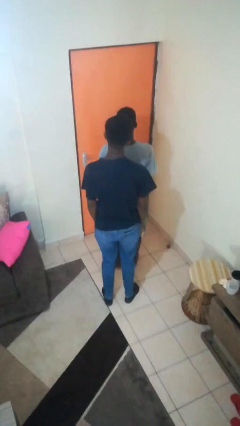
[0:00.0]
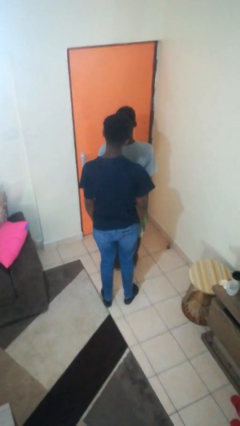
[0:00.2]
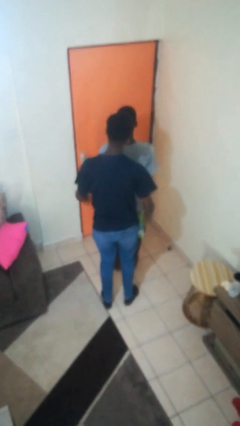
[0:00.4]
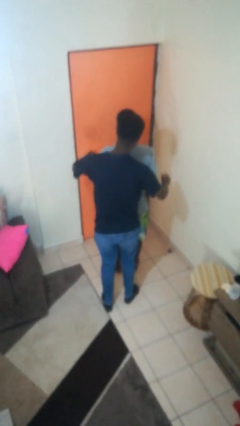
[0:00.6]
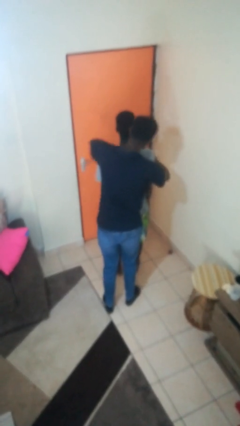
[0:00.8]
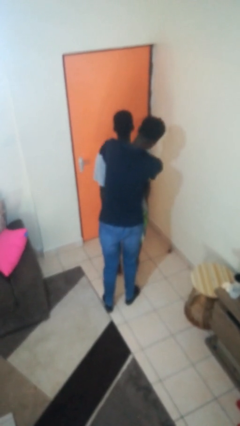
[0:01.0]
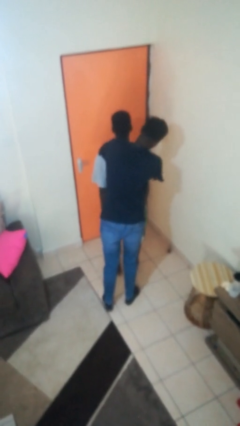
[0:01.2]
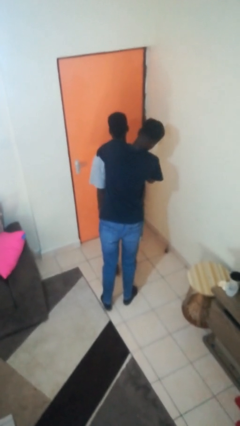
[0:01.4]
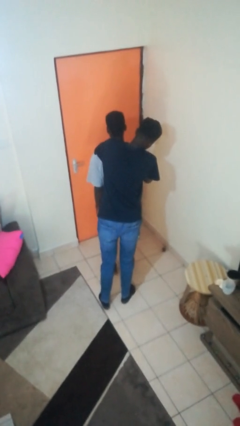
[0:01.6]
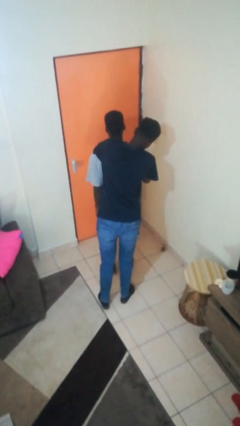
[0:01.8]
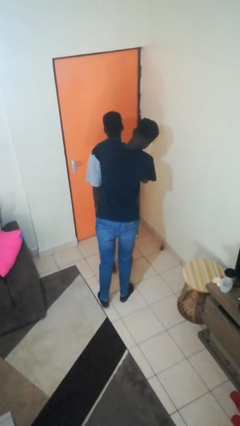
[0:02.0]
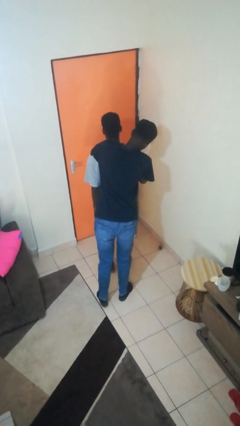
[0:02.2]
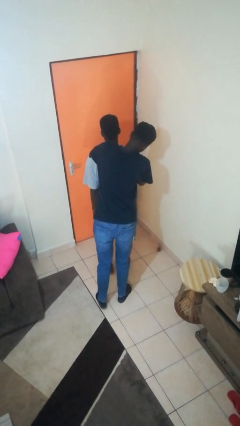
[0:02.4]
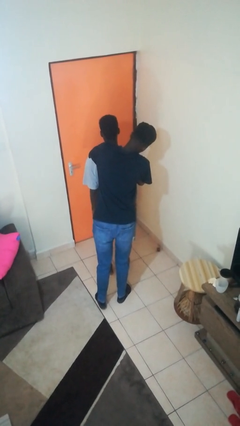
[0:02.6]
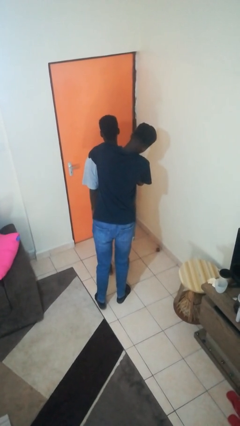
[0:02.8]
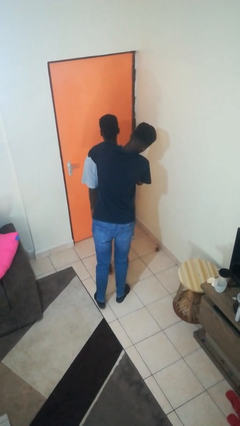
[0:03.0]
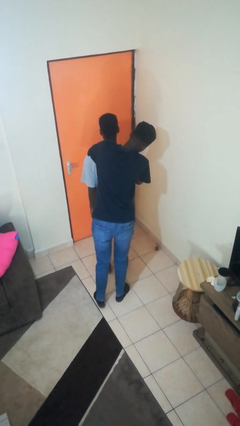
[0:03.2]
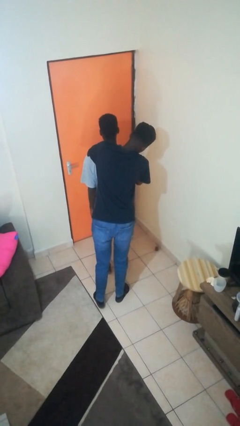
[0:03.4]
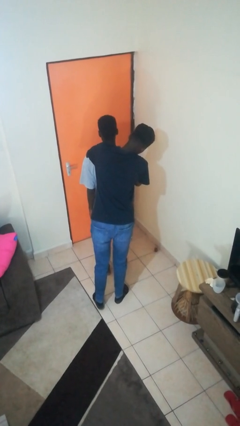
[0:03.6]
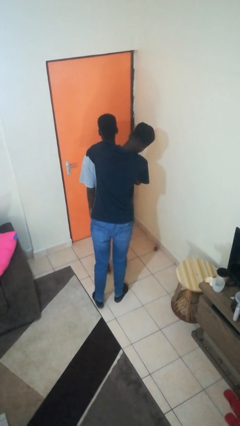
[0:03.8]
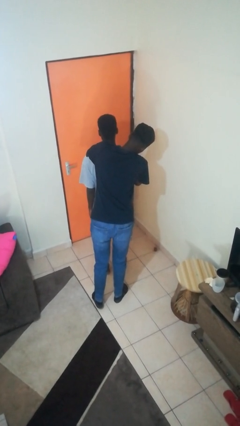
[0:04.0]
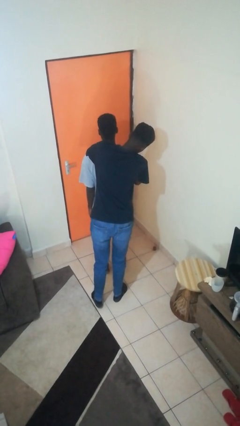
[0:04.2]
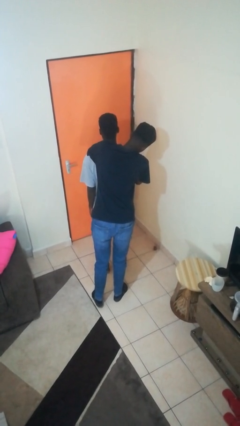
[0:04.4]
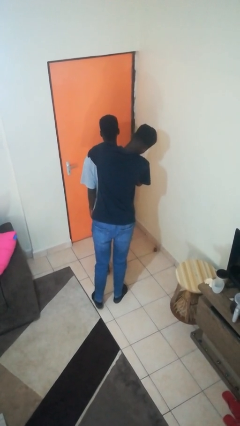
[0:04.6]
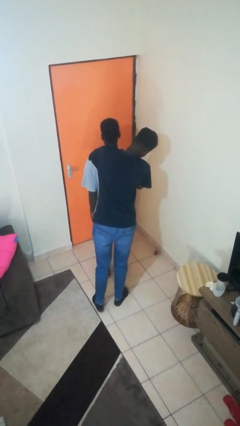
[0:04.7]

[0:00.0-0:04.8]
person hugs person from behind

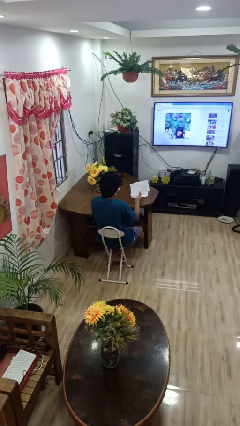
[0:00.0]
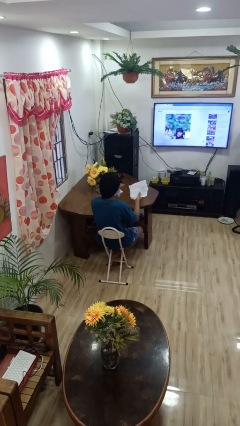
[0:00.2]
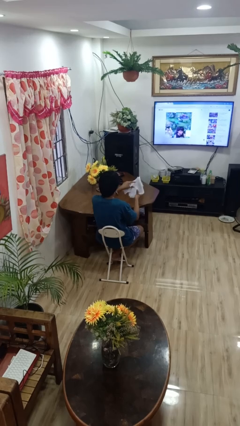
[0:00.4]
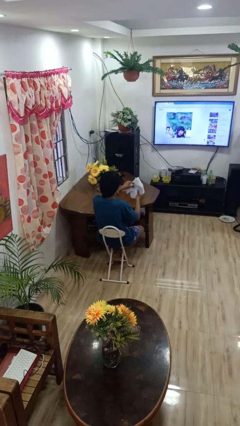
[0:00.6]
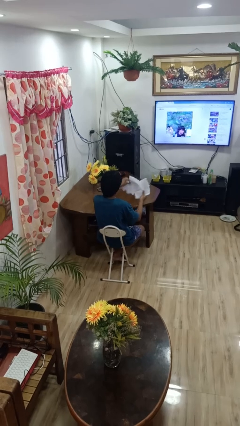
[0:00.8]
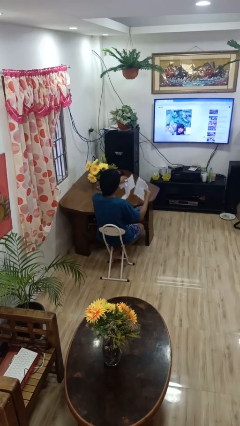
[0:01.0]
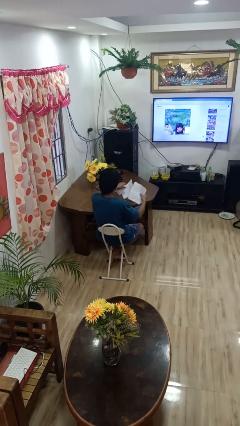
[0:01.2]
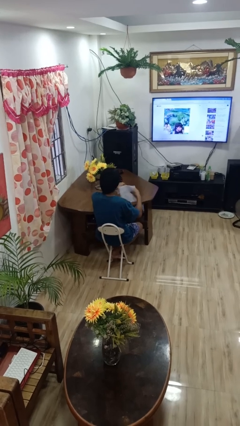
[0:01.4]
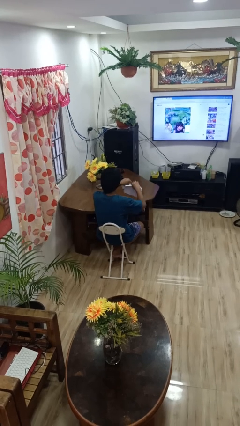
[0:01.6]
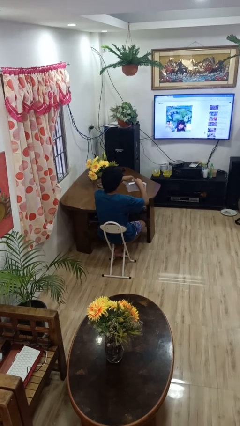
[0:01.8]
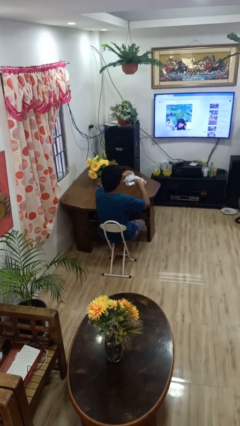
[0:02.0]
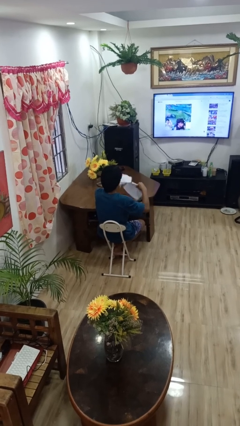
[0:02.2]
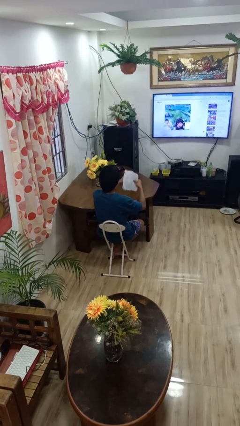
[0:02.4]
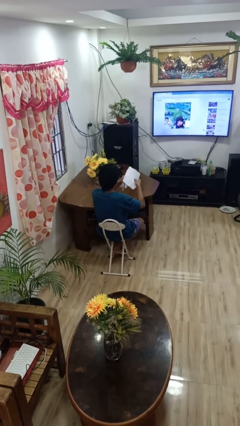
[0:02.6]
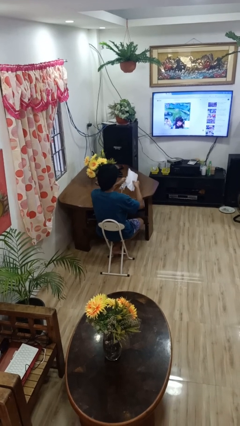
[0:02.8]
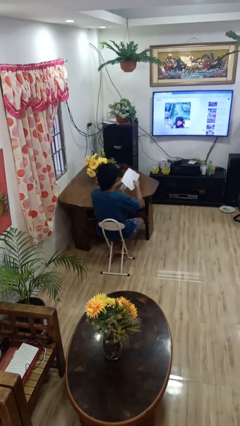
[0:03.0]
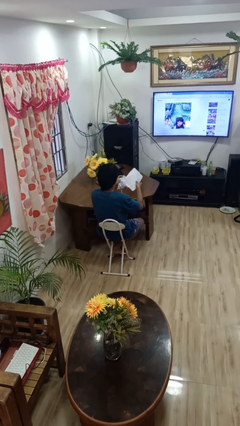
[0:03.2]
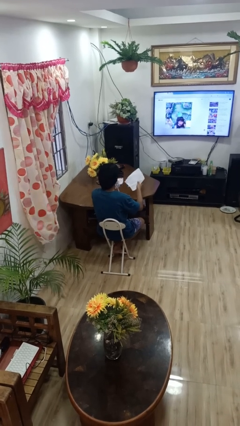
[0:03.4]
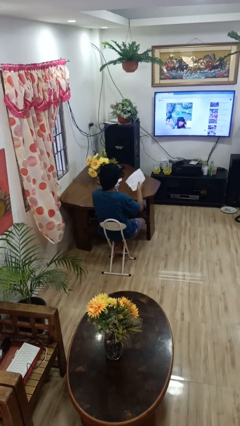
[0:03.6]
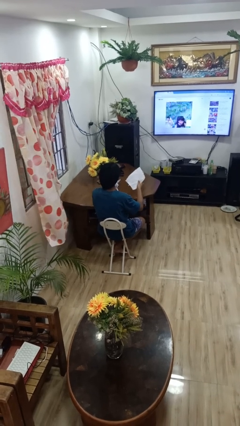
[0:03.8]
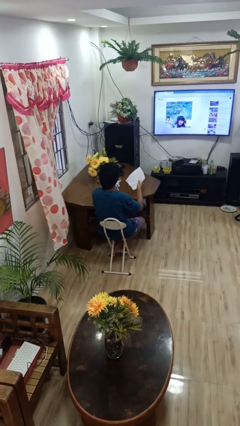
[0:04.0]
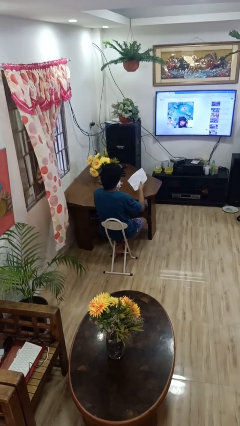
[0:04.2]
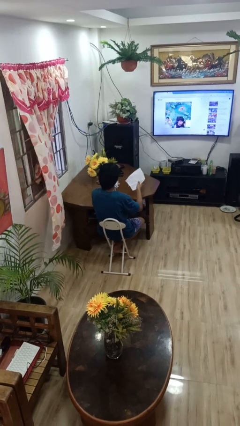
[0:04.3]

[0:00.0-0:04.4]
person tears paper

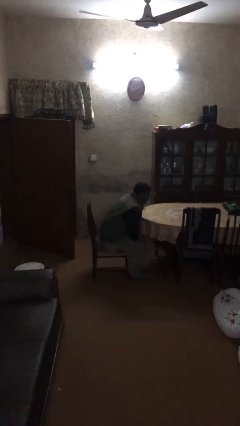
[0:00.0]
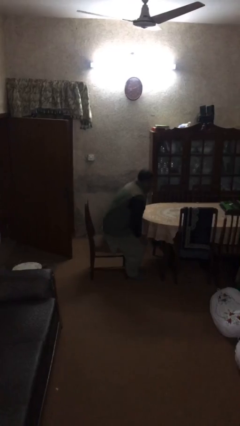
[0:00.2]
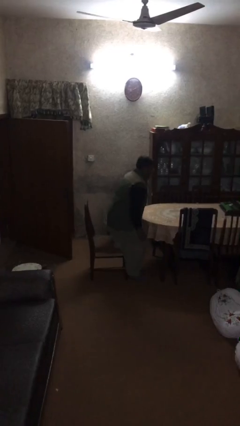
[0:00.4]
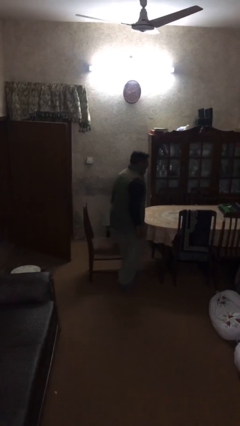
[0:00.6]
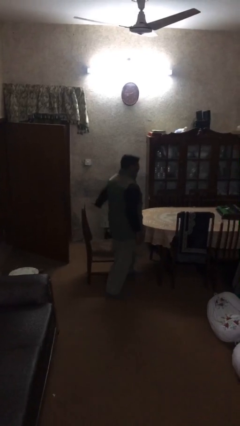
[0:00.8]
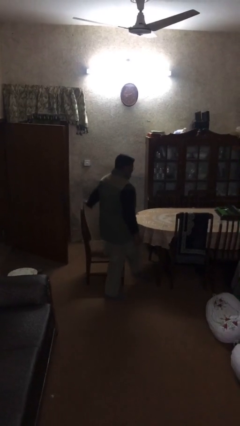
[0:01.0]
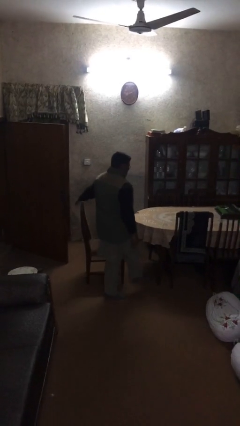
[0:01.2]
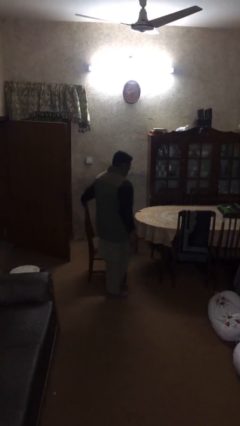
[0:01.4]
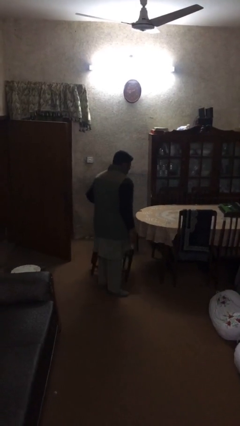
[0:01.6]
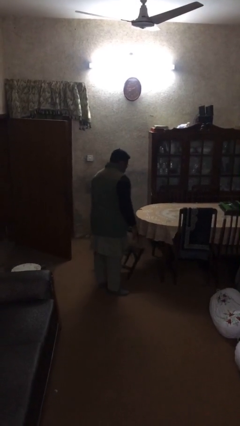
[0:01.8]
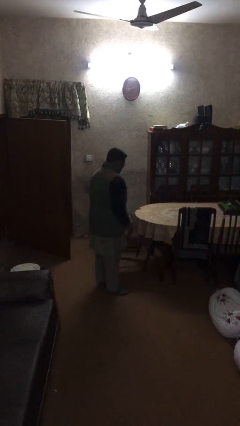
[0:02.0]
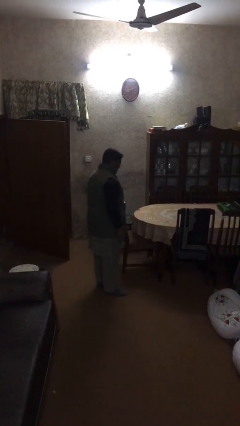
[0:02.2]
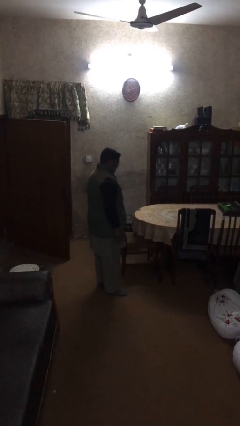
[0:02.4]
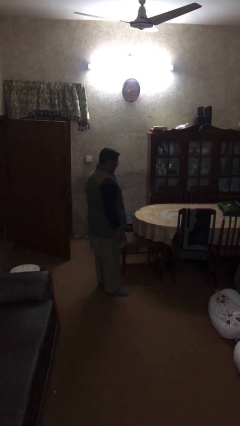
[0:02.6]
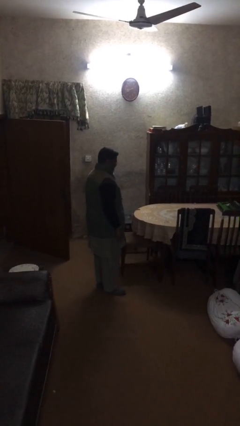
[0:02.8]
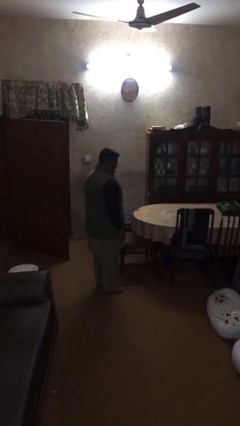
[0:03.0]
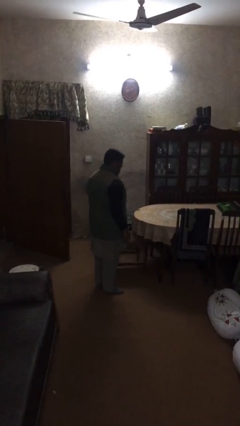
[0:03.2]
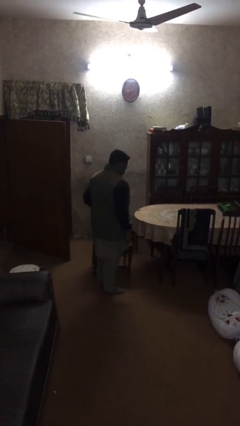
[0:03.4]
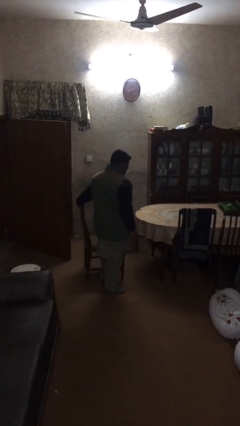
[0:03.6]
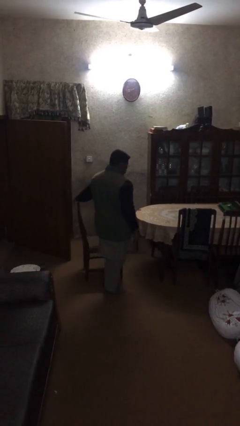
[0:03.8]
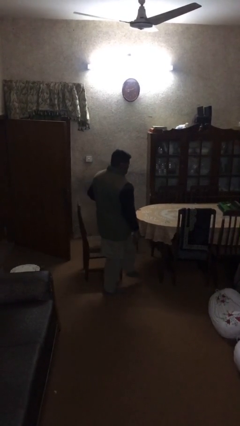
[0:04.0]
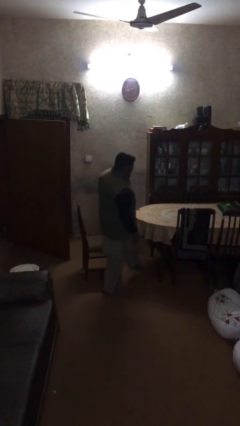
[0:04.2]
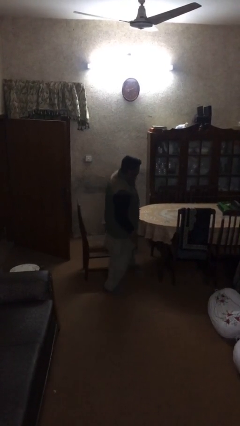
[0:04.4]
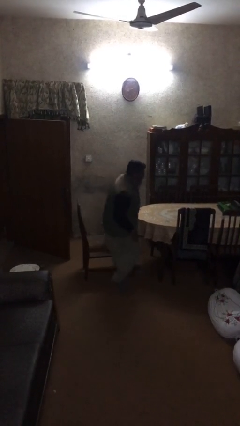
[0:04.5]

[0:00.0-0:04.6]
person stands up

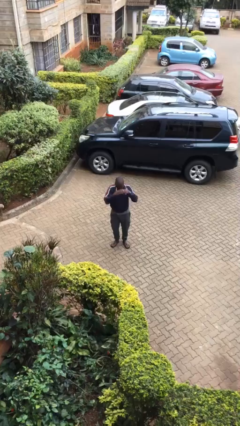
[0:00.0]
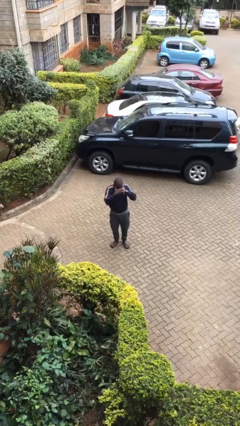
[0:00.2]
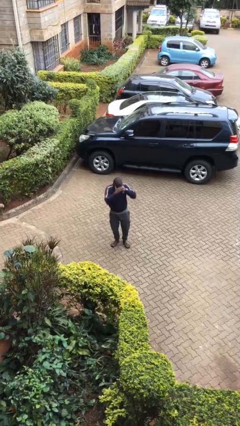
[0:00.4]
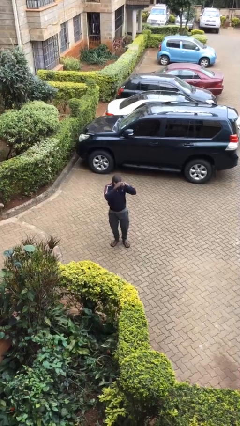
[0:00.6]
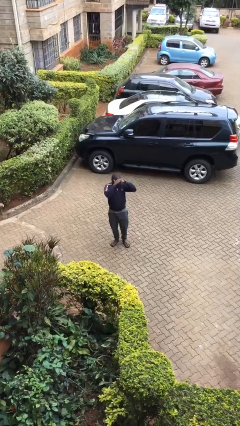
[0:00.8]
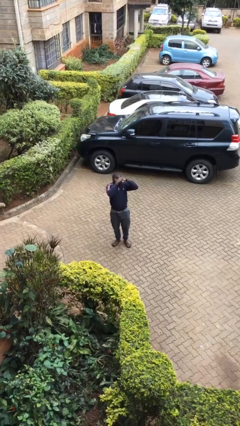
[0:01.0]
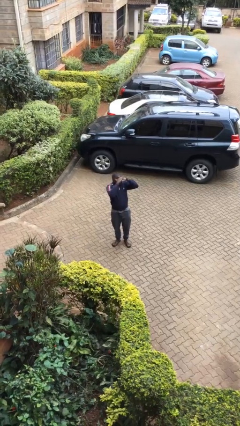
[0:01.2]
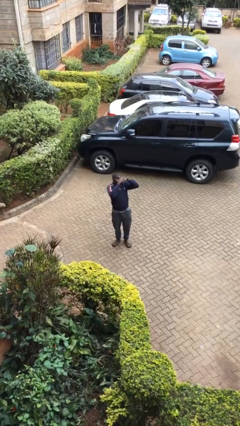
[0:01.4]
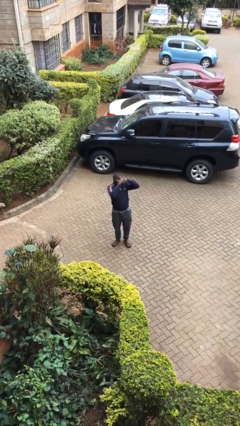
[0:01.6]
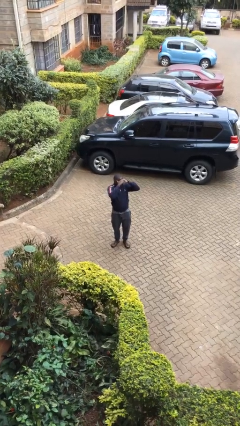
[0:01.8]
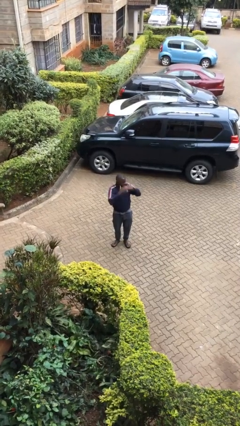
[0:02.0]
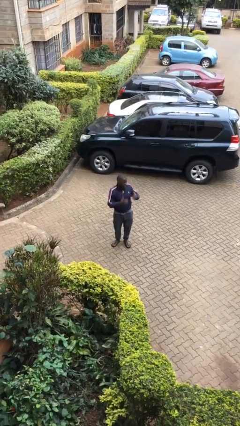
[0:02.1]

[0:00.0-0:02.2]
person shades eyes

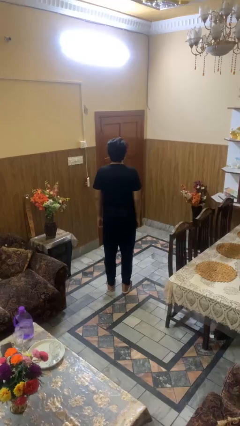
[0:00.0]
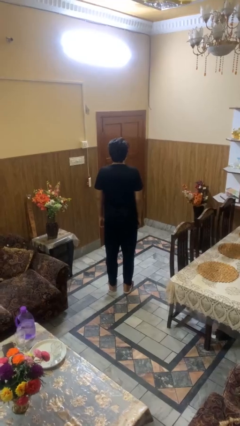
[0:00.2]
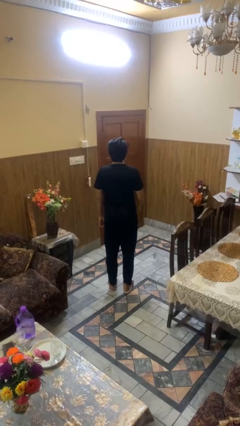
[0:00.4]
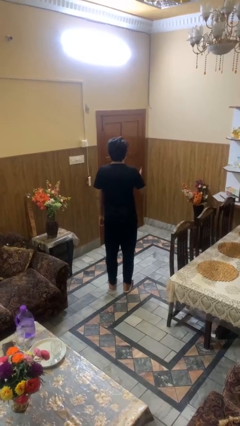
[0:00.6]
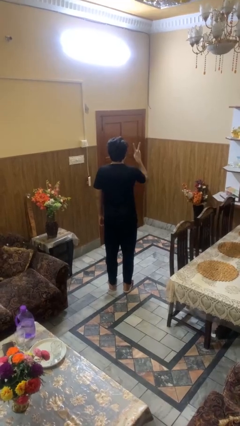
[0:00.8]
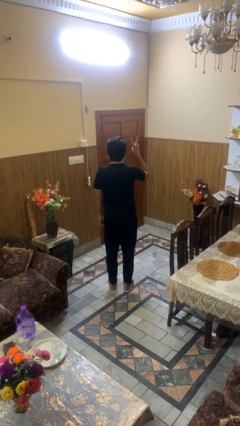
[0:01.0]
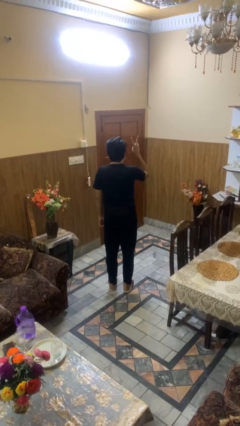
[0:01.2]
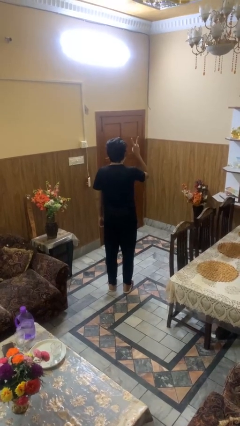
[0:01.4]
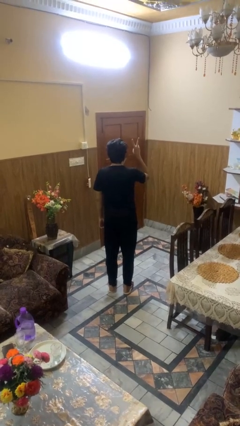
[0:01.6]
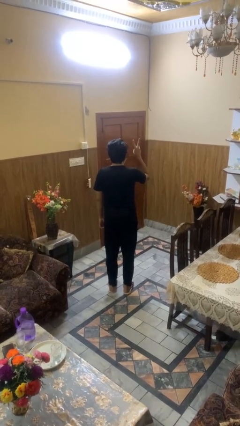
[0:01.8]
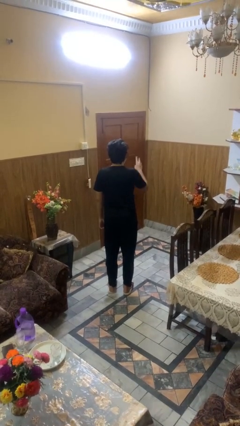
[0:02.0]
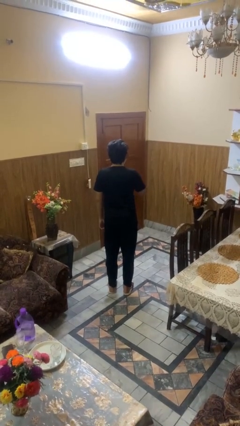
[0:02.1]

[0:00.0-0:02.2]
person gestures peace
